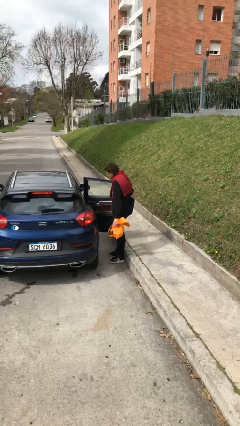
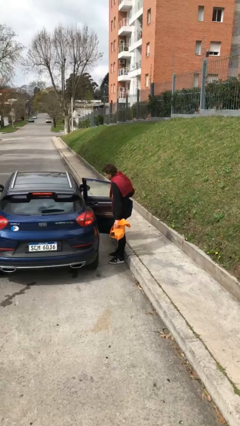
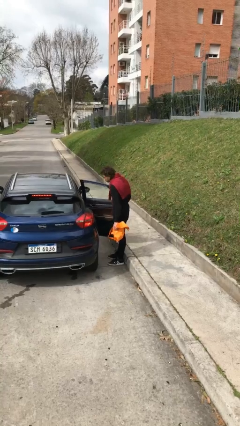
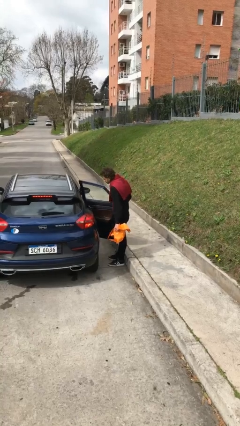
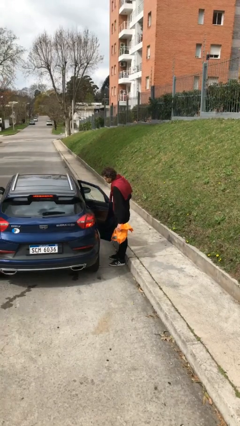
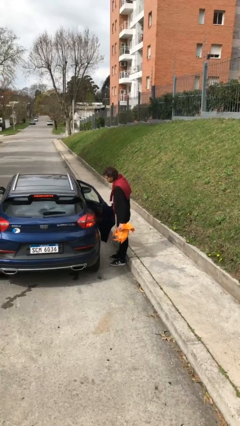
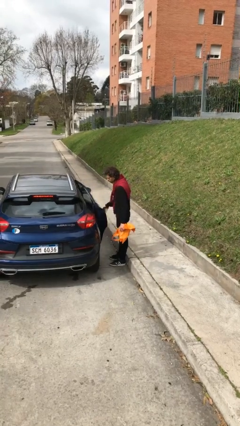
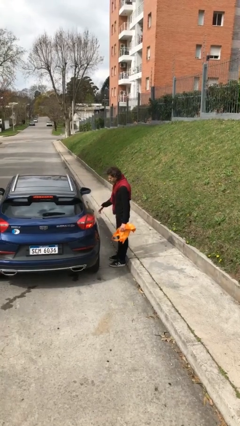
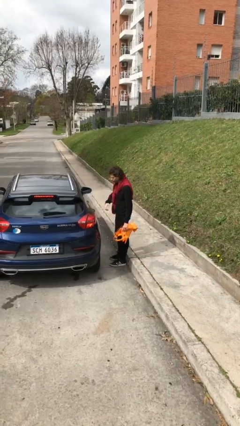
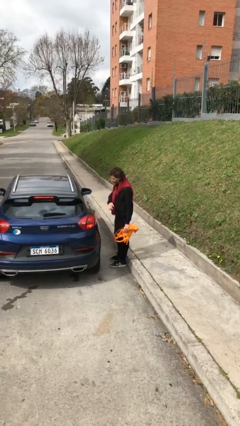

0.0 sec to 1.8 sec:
person closes car door

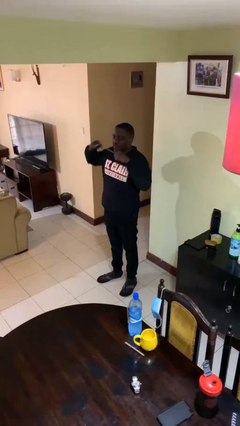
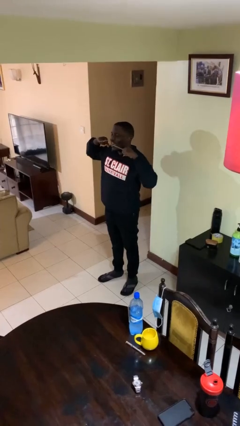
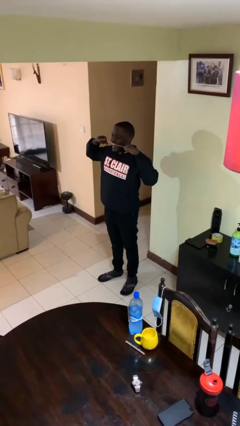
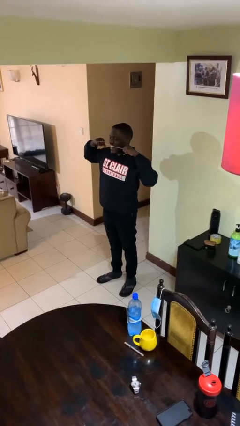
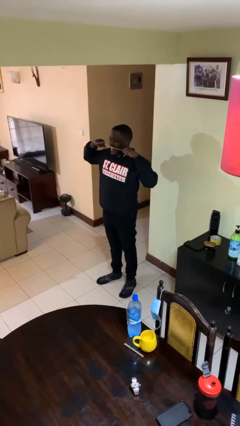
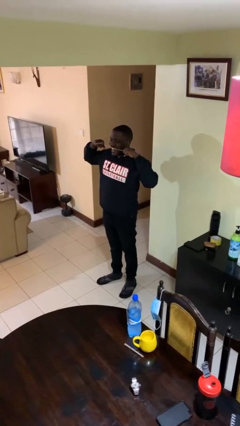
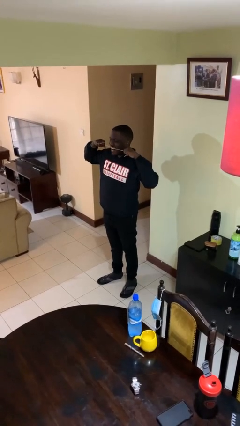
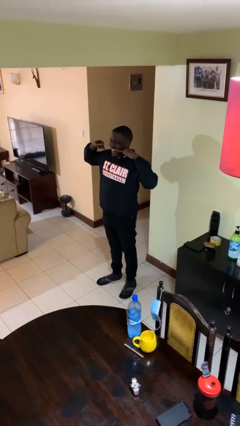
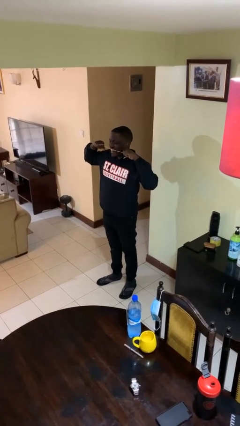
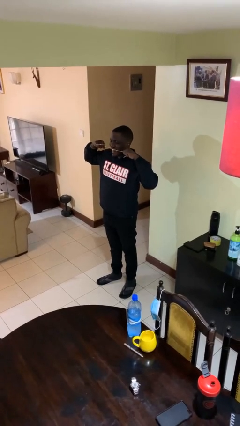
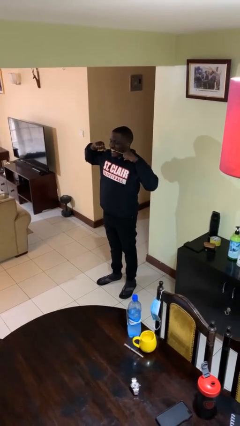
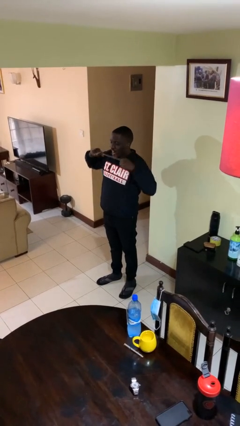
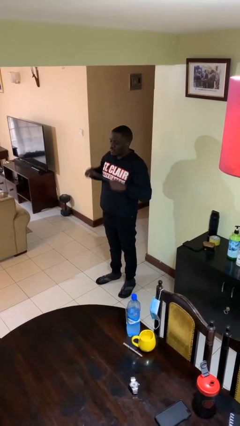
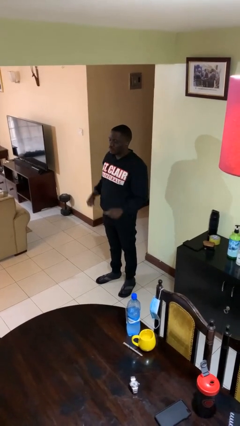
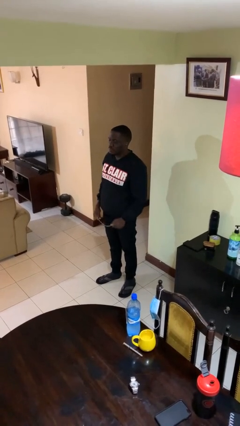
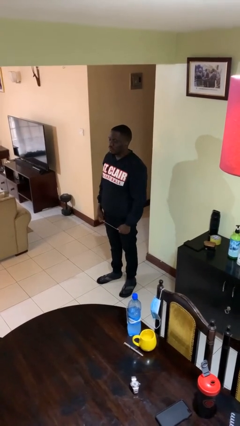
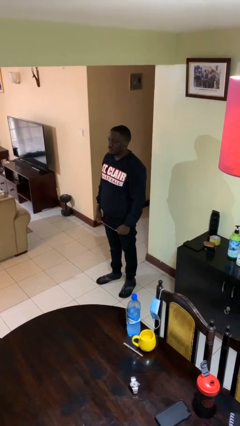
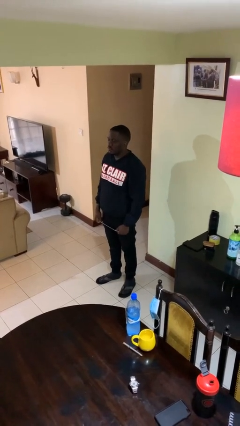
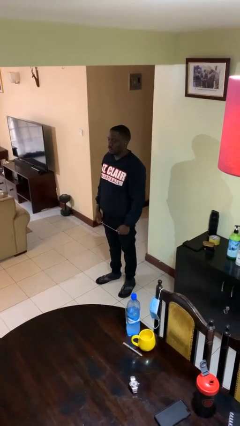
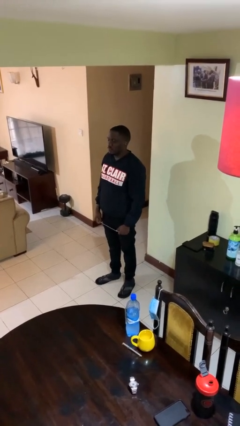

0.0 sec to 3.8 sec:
person flosses

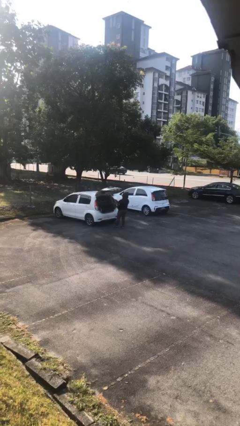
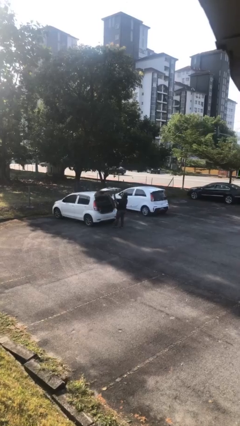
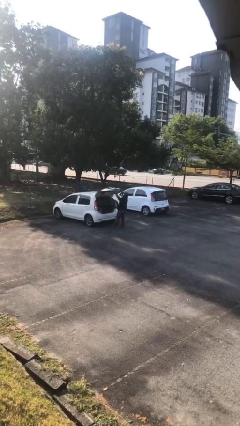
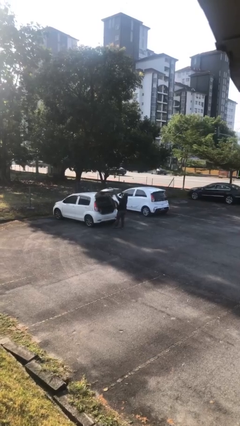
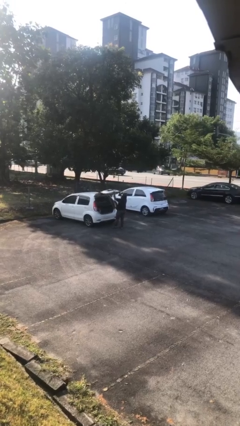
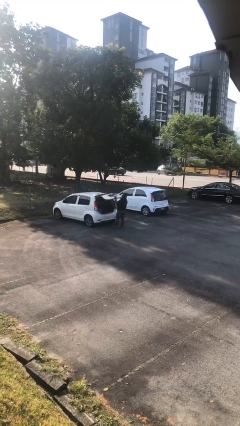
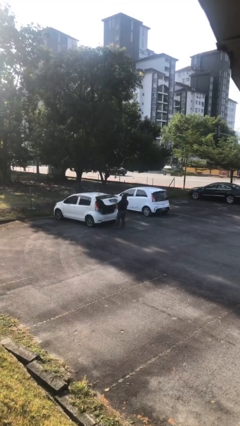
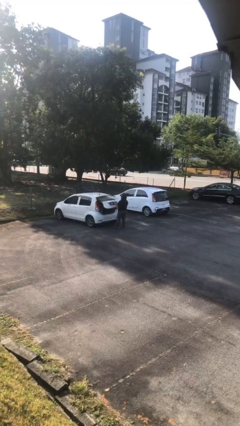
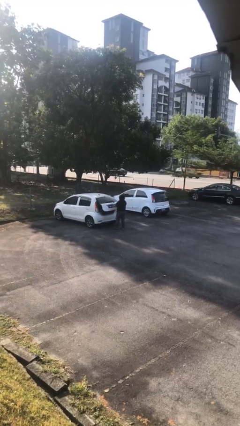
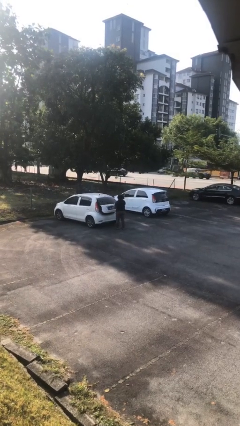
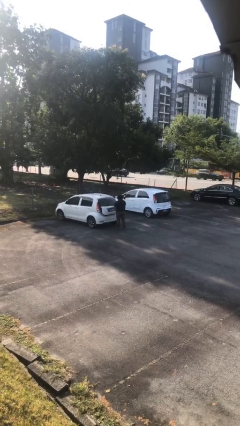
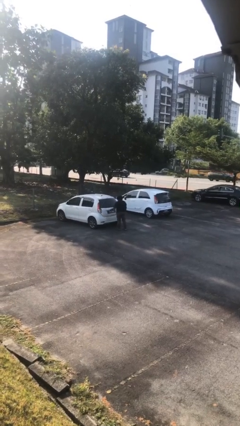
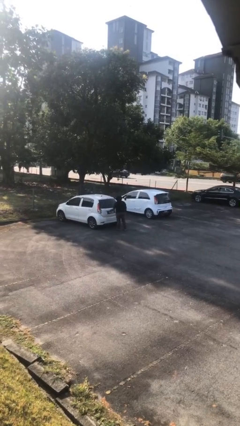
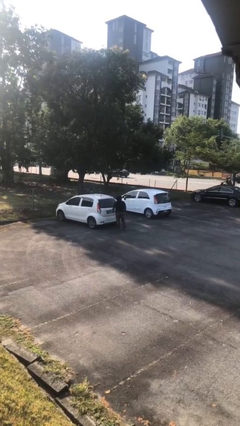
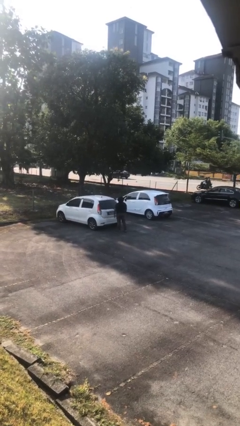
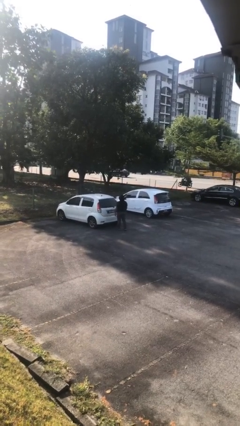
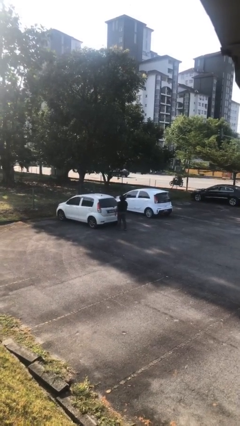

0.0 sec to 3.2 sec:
person closes car trunk

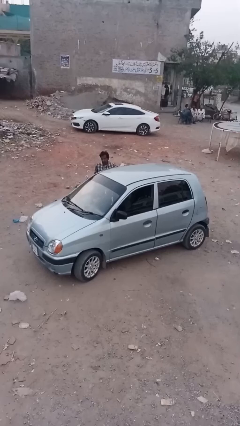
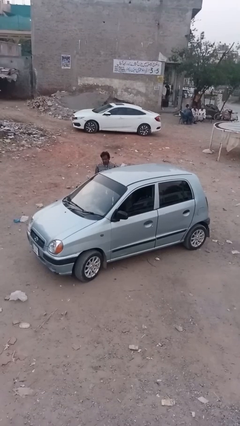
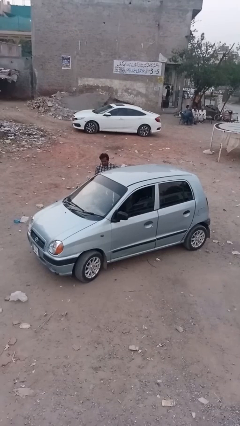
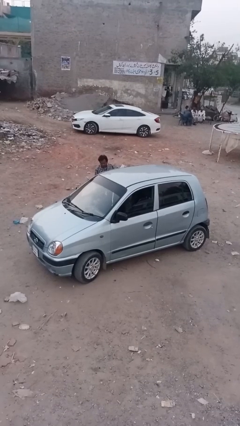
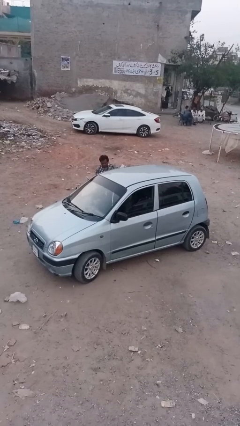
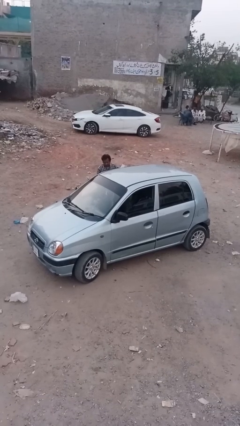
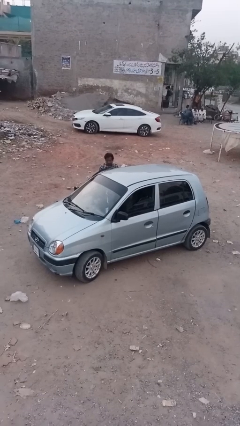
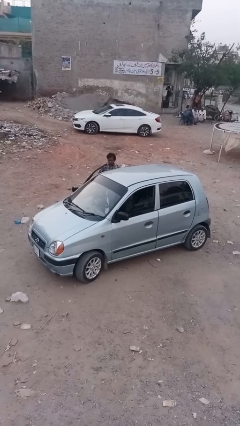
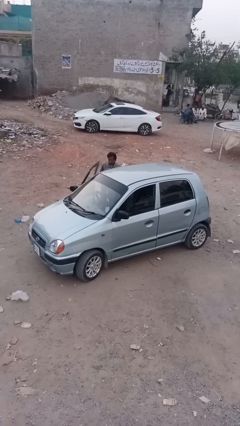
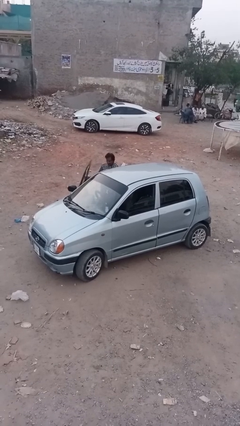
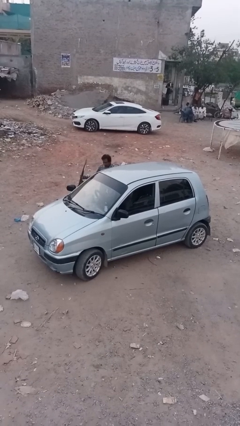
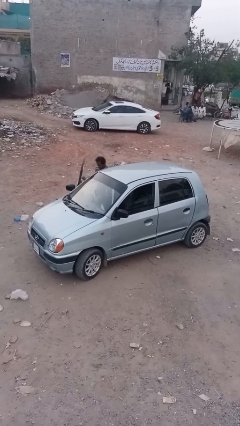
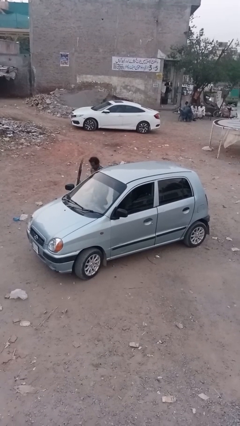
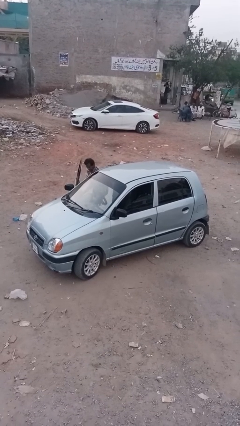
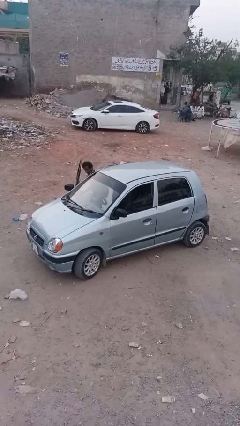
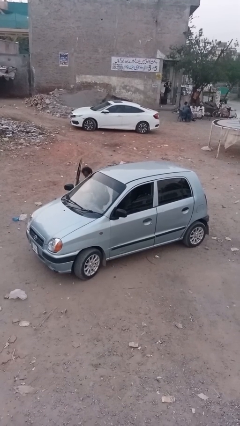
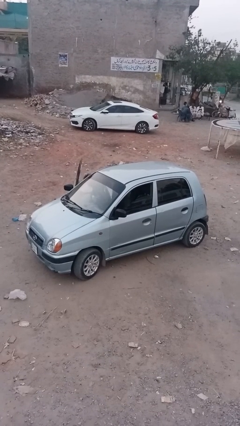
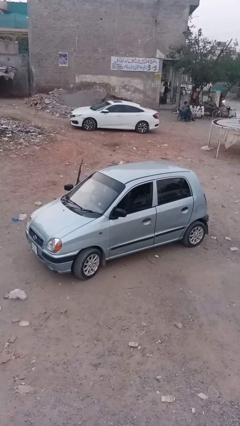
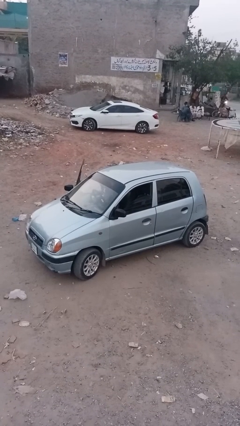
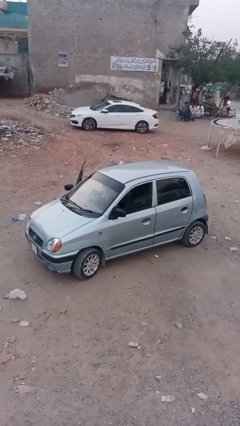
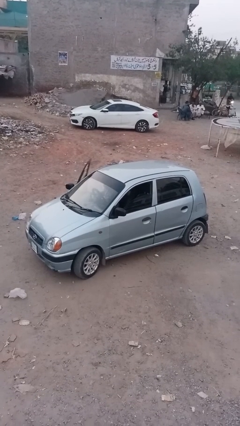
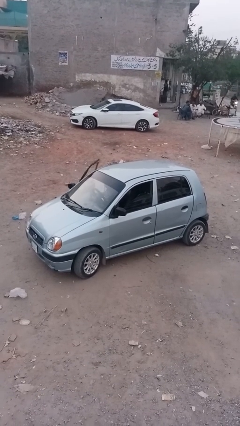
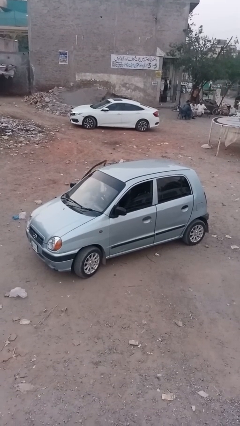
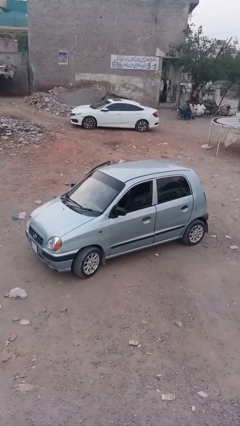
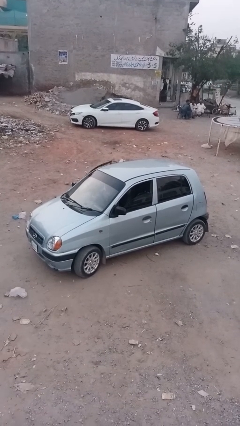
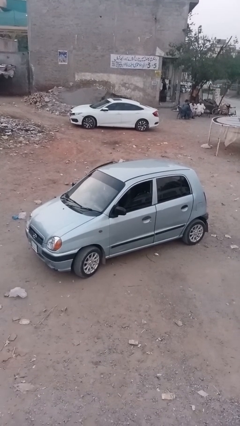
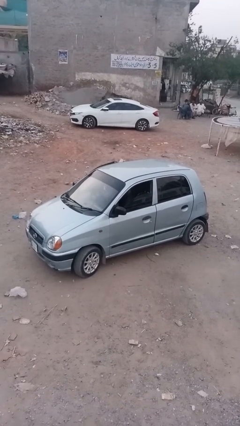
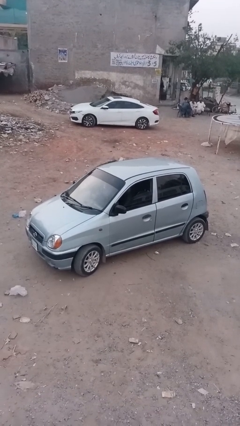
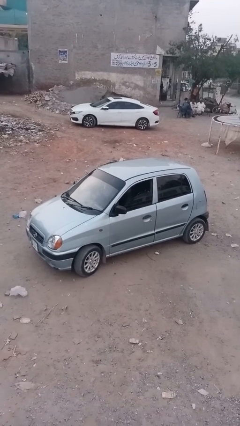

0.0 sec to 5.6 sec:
car picks up person

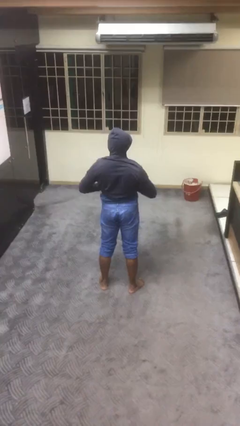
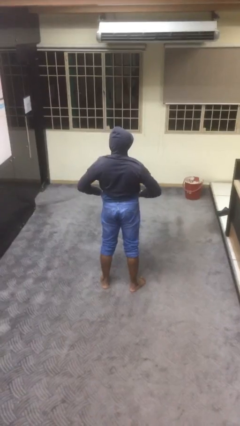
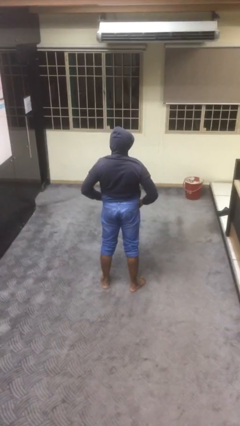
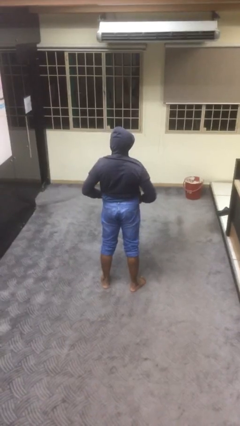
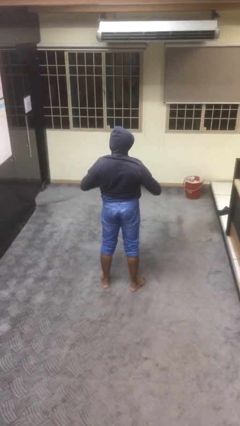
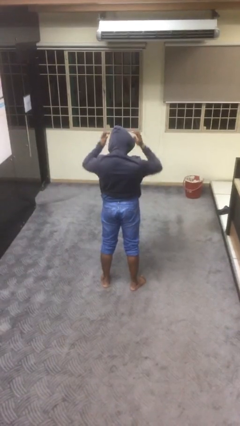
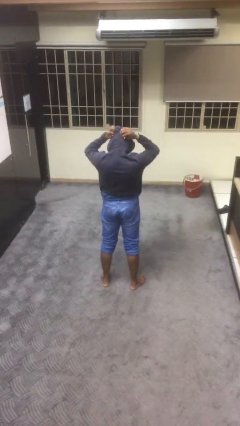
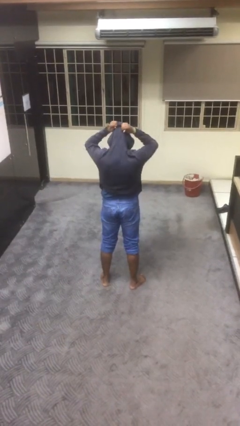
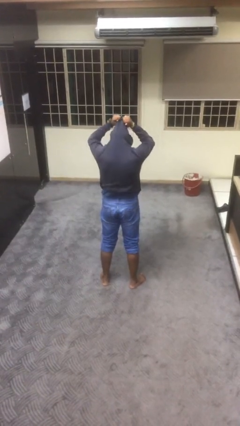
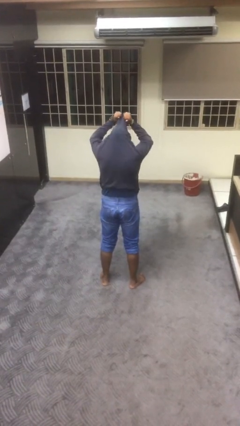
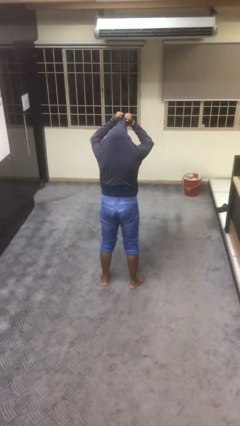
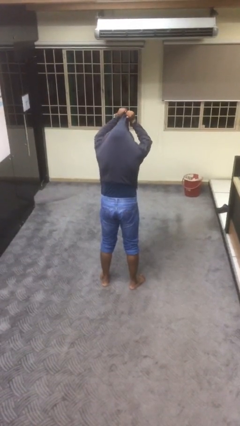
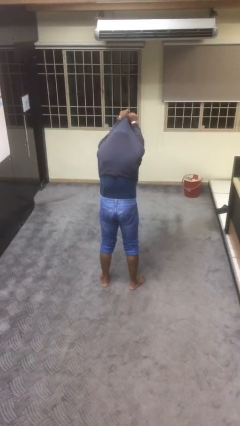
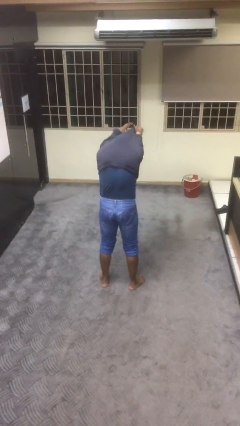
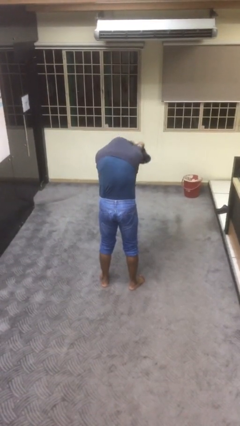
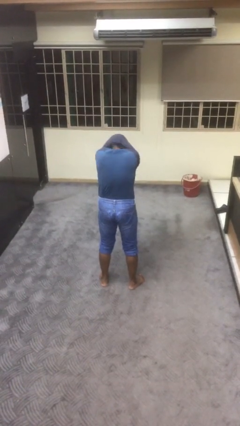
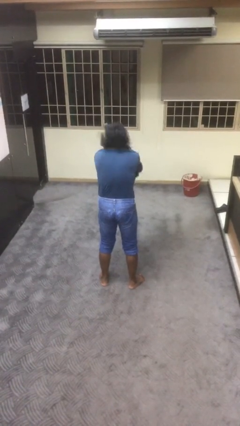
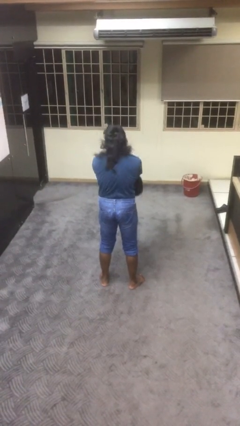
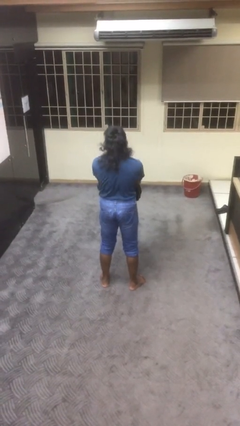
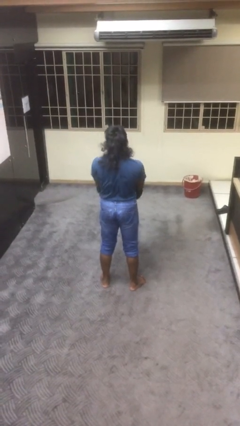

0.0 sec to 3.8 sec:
person takes off hoodie
